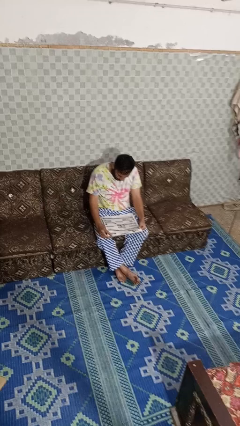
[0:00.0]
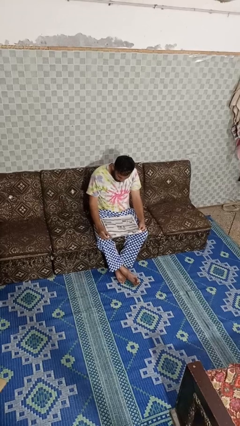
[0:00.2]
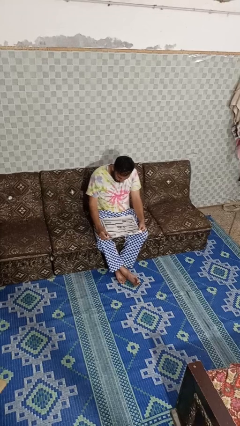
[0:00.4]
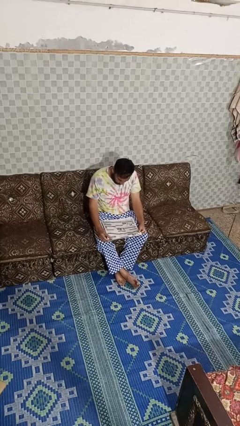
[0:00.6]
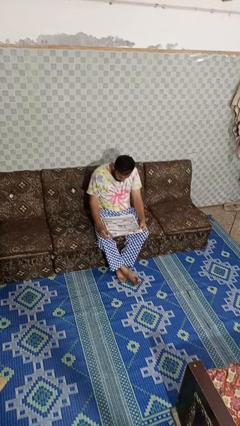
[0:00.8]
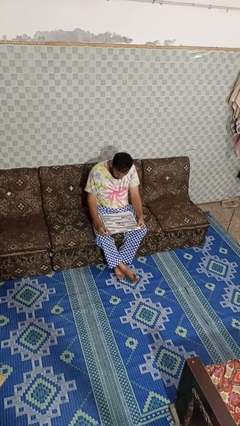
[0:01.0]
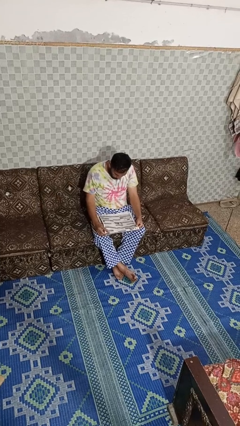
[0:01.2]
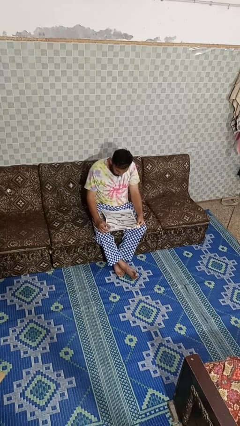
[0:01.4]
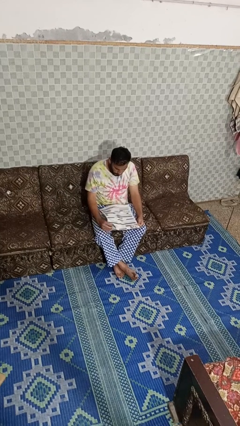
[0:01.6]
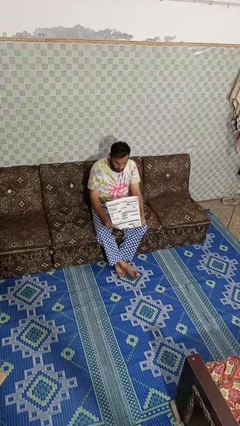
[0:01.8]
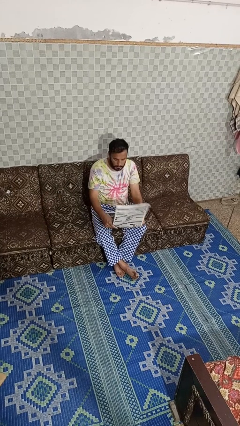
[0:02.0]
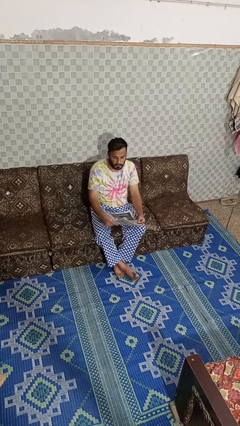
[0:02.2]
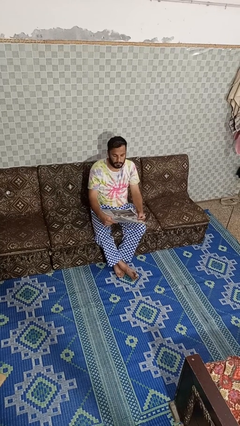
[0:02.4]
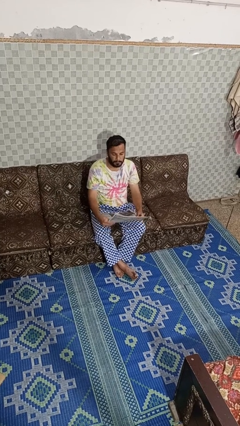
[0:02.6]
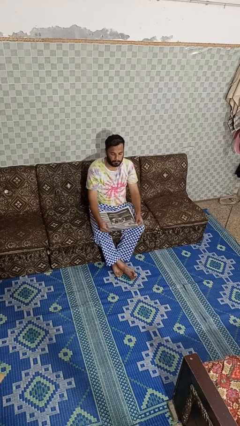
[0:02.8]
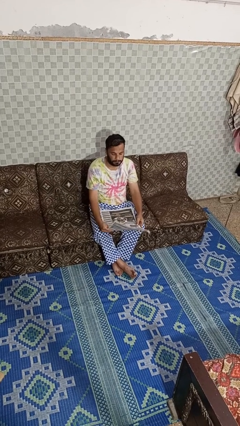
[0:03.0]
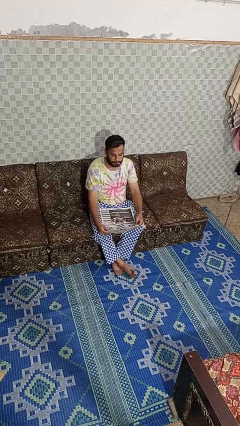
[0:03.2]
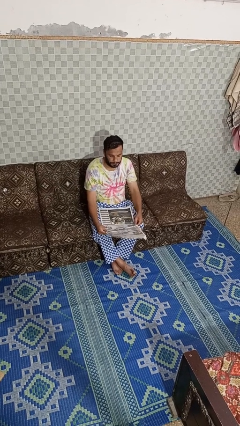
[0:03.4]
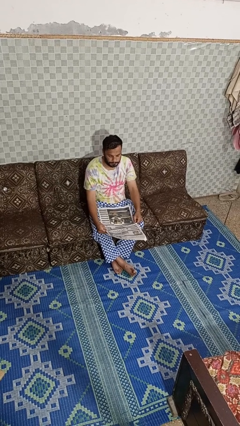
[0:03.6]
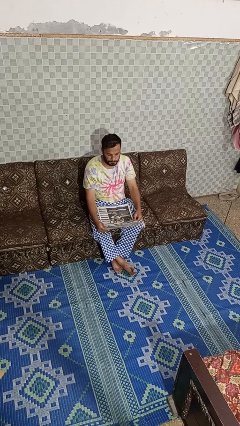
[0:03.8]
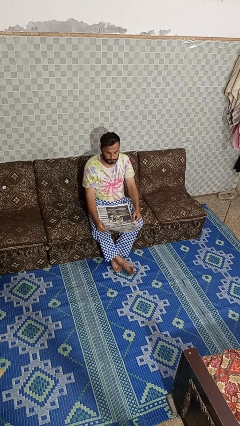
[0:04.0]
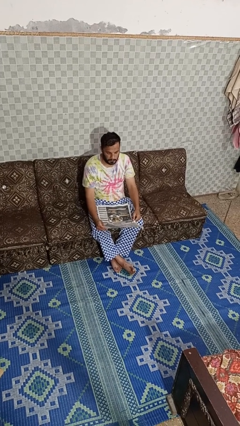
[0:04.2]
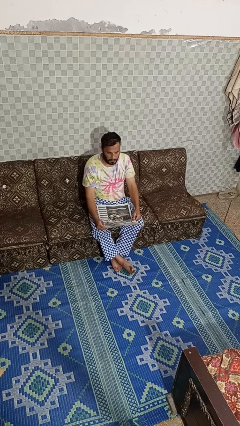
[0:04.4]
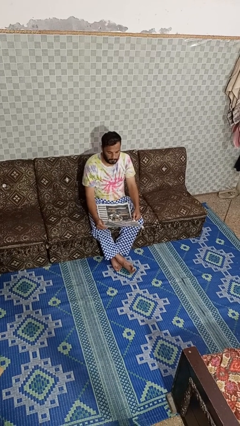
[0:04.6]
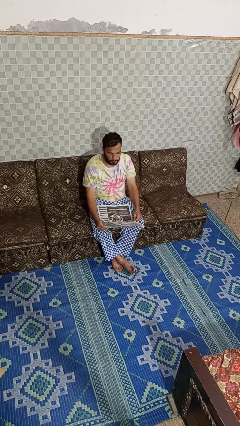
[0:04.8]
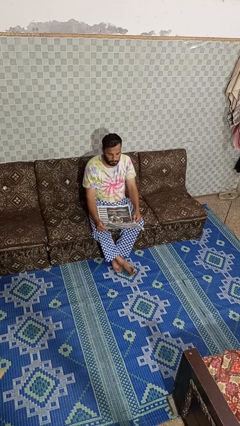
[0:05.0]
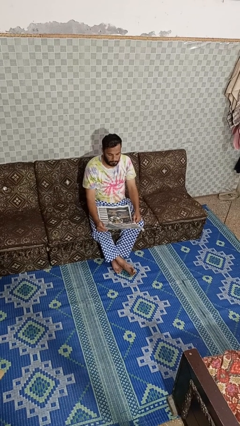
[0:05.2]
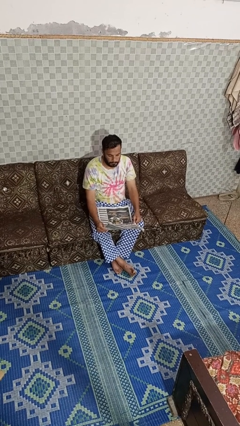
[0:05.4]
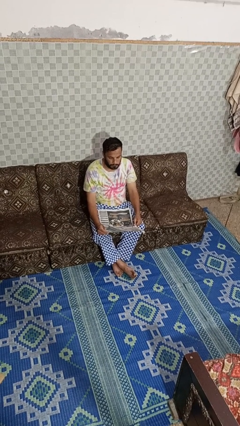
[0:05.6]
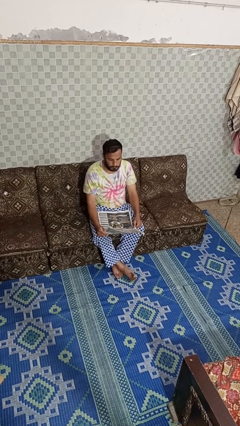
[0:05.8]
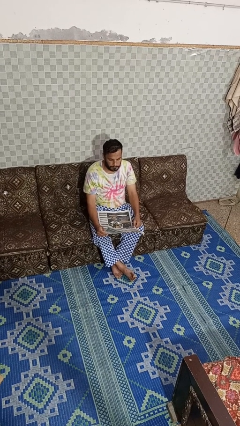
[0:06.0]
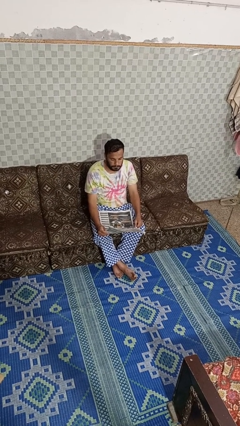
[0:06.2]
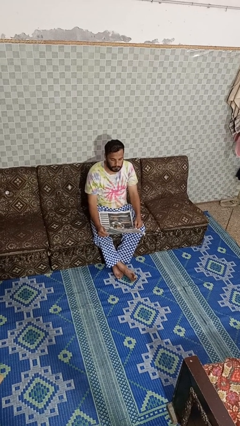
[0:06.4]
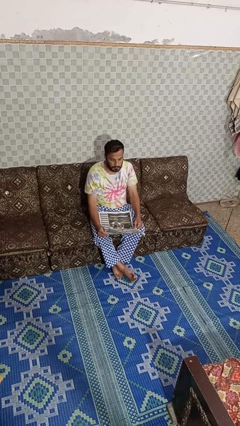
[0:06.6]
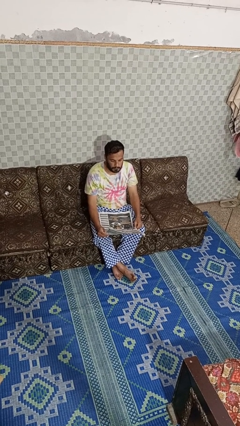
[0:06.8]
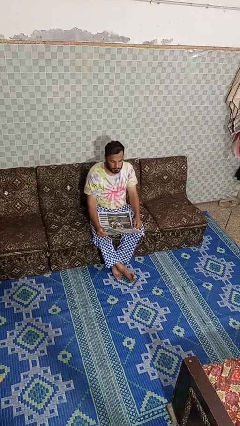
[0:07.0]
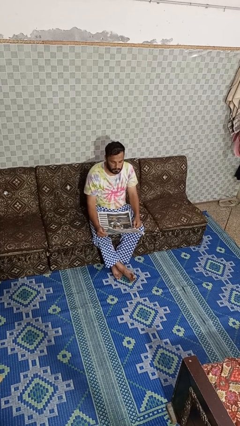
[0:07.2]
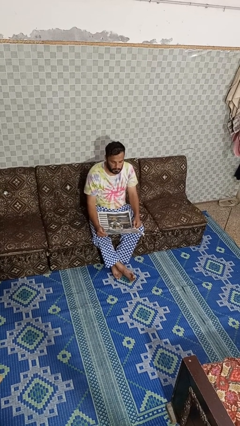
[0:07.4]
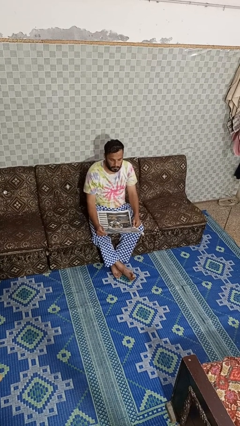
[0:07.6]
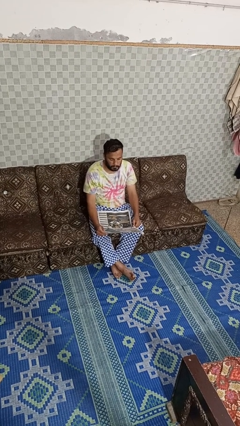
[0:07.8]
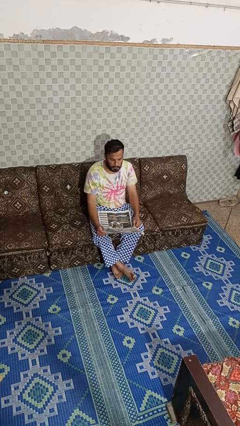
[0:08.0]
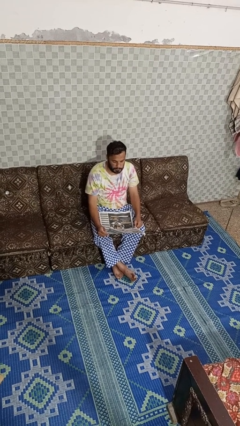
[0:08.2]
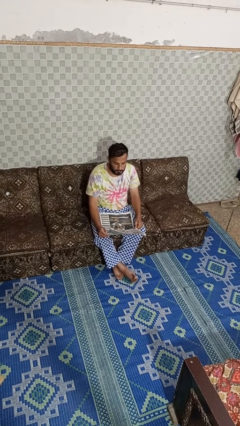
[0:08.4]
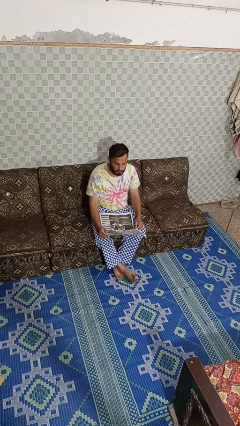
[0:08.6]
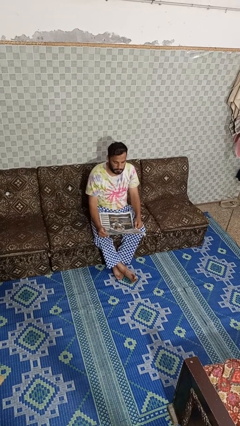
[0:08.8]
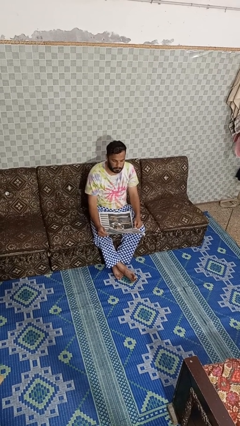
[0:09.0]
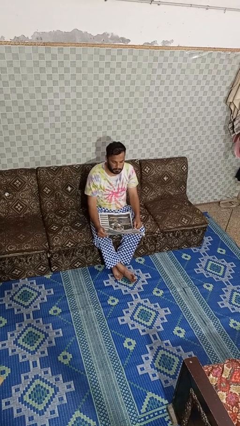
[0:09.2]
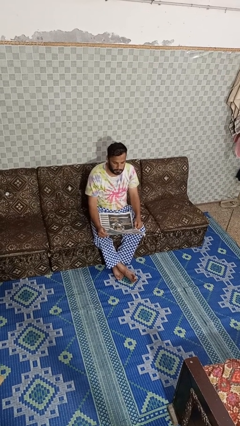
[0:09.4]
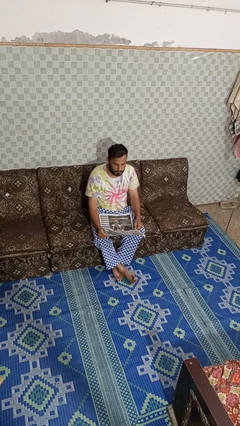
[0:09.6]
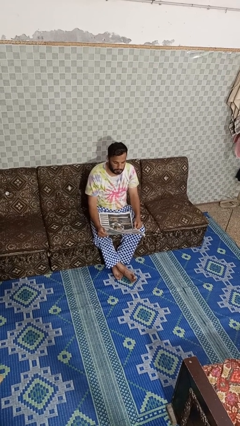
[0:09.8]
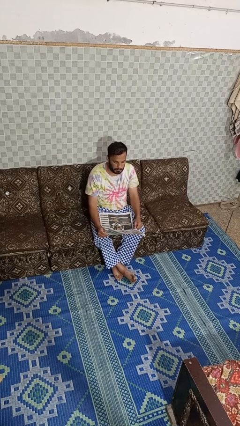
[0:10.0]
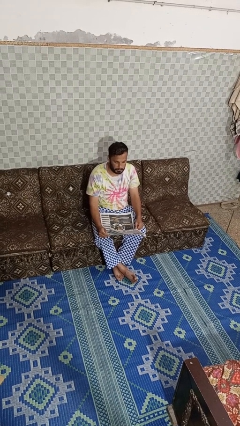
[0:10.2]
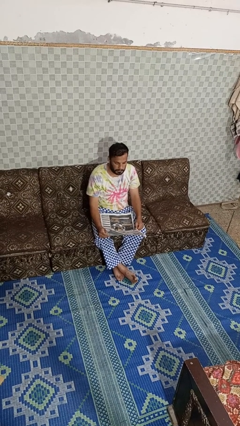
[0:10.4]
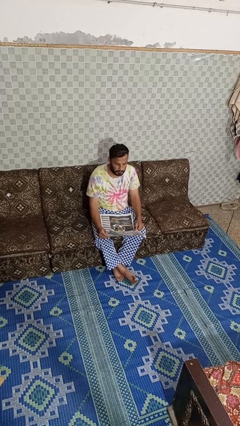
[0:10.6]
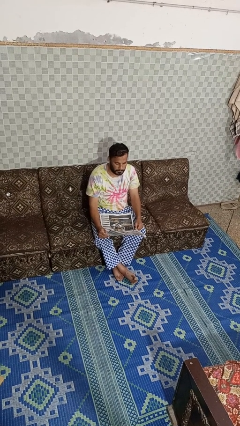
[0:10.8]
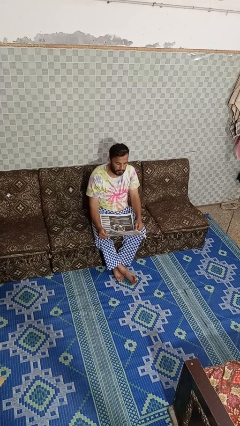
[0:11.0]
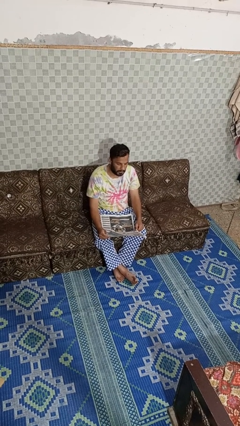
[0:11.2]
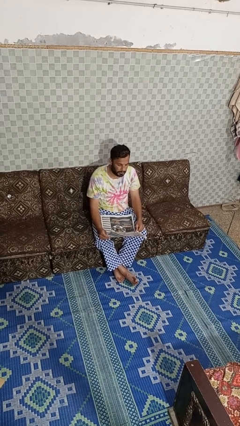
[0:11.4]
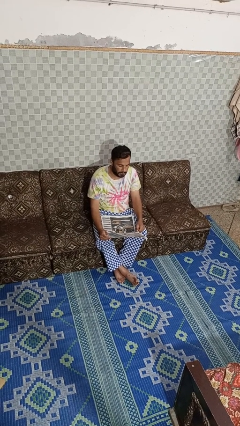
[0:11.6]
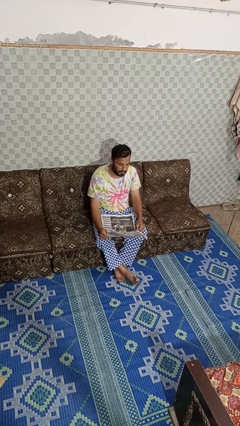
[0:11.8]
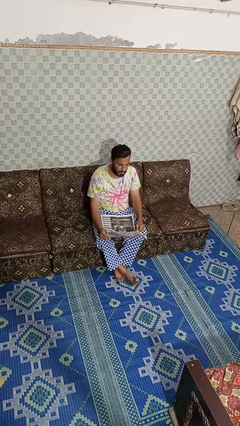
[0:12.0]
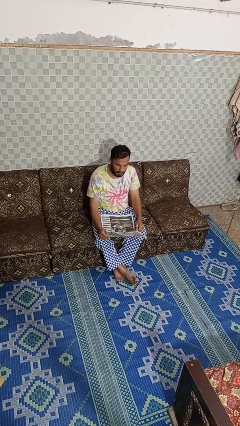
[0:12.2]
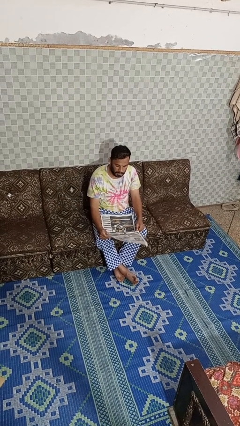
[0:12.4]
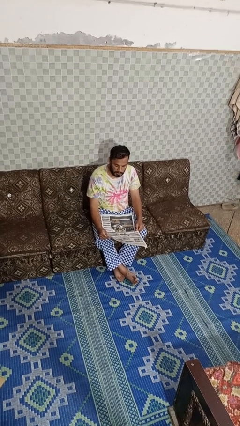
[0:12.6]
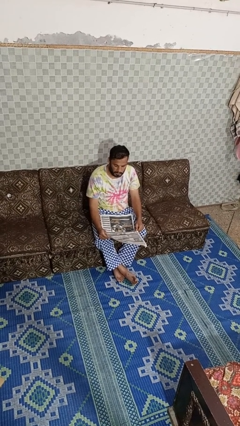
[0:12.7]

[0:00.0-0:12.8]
person reads newspaper

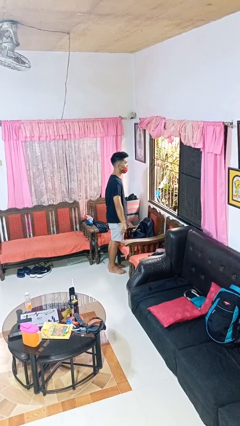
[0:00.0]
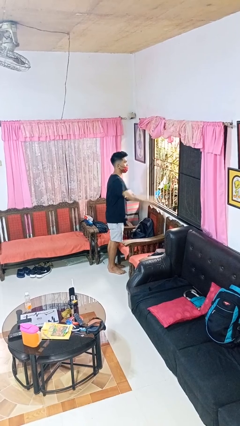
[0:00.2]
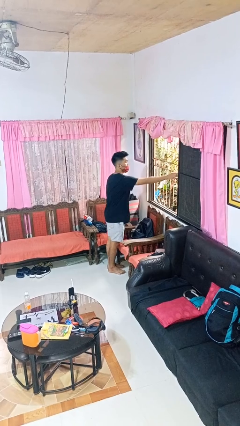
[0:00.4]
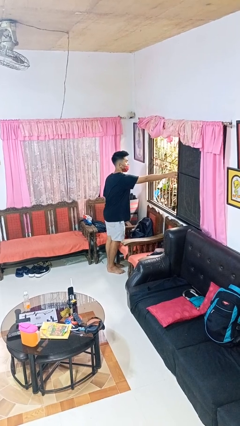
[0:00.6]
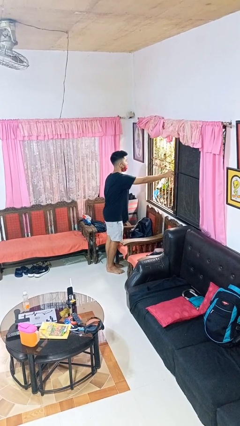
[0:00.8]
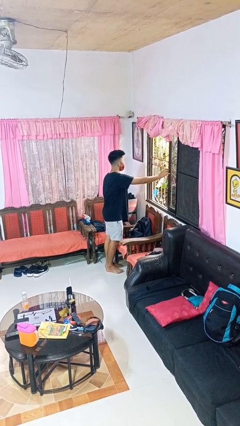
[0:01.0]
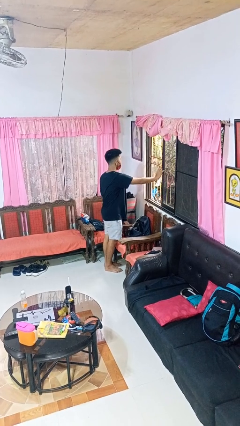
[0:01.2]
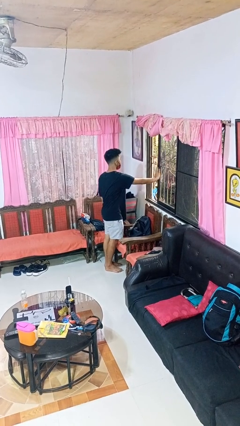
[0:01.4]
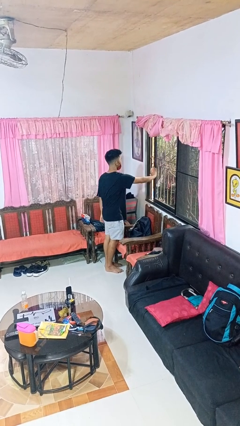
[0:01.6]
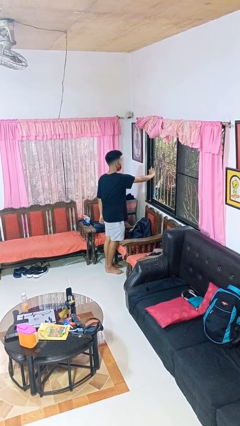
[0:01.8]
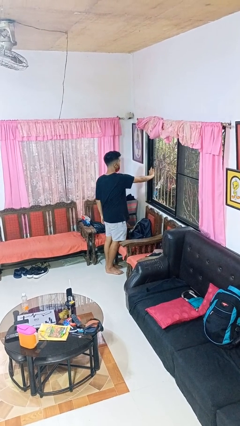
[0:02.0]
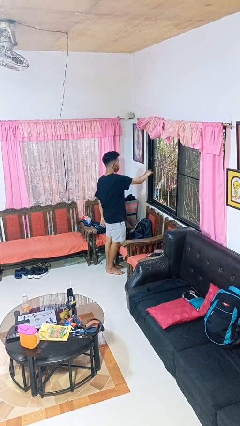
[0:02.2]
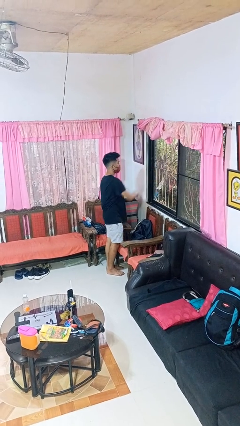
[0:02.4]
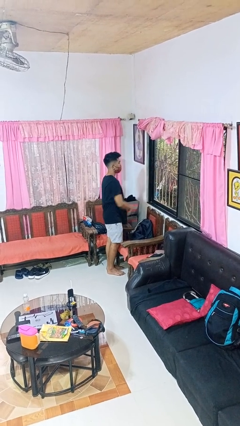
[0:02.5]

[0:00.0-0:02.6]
person closes home window

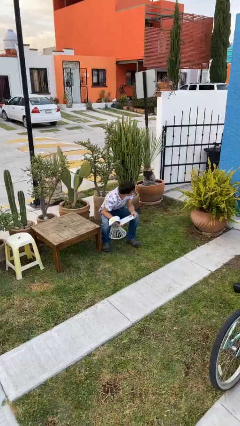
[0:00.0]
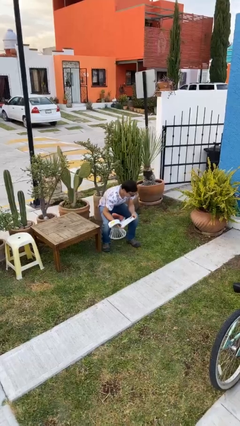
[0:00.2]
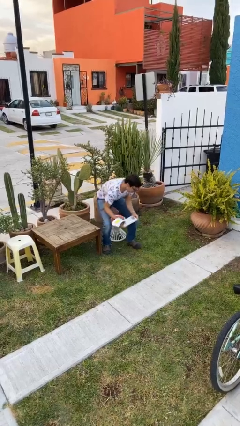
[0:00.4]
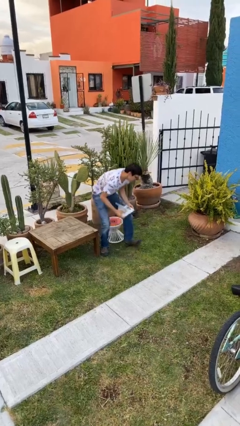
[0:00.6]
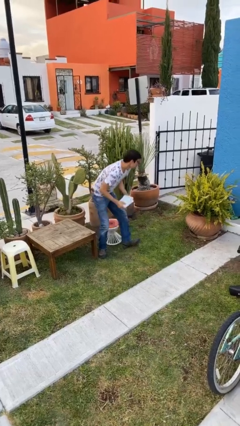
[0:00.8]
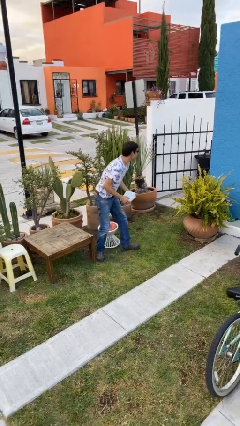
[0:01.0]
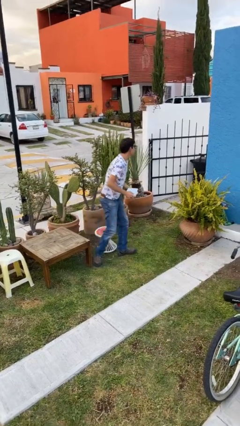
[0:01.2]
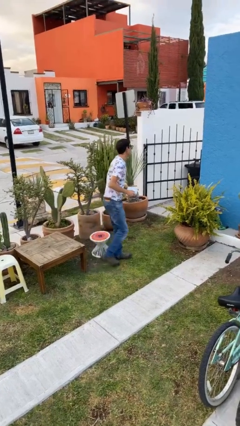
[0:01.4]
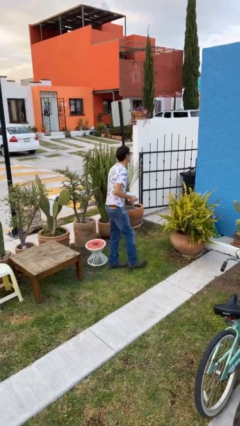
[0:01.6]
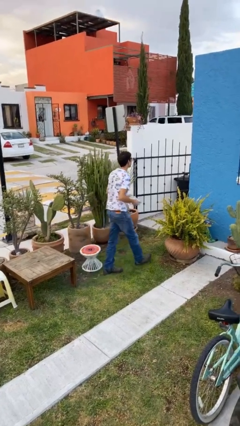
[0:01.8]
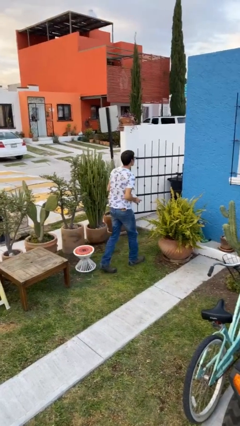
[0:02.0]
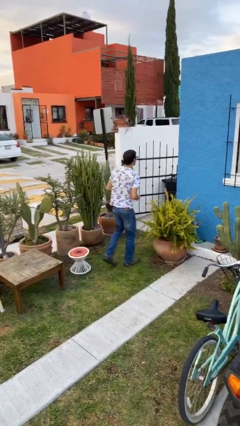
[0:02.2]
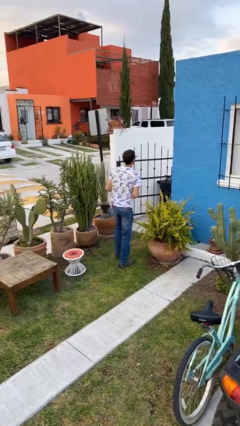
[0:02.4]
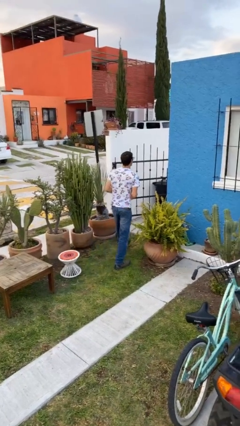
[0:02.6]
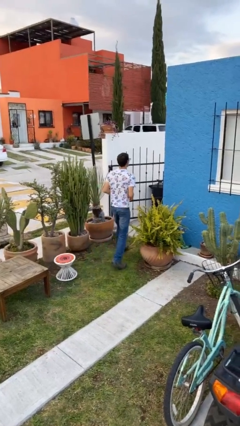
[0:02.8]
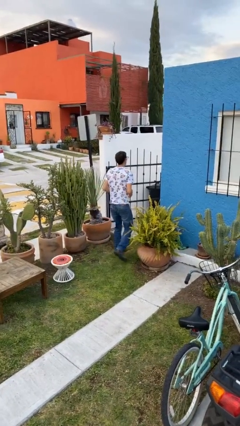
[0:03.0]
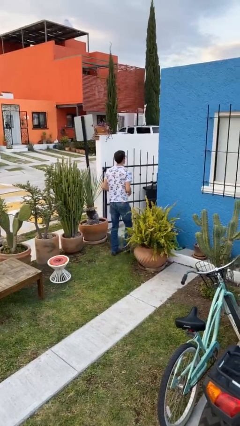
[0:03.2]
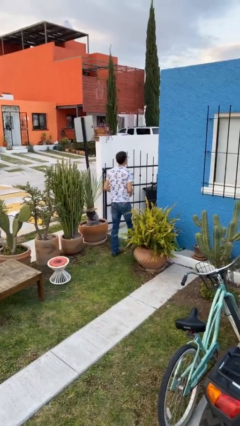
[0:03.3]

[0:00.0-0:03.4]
person stands up
